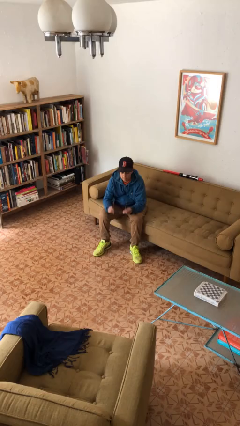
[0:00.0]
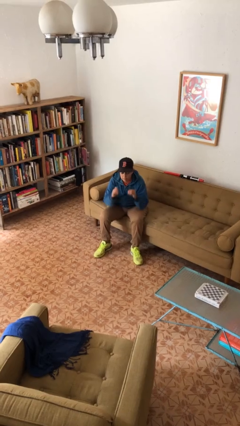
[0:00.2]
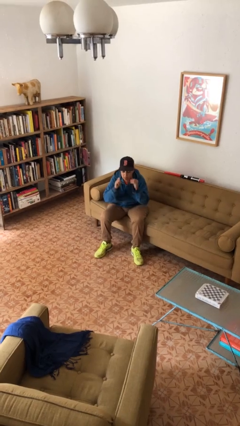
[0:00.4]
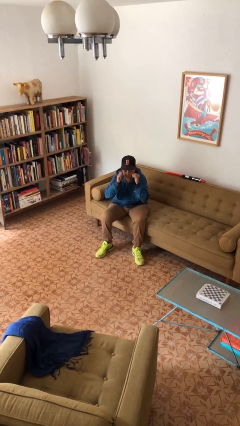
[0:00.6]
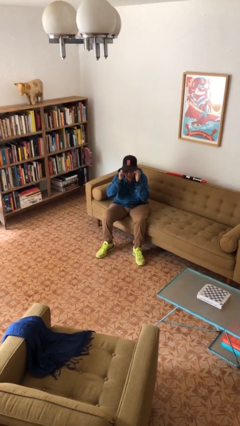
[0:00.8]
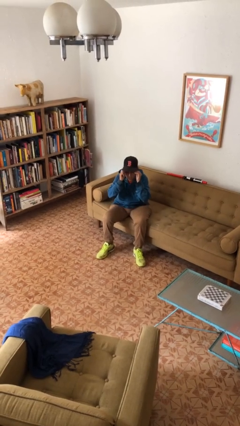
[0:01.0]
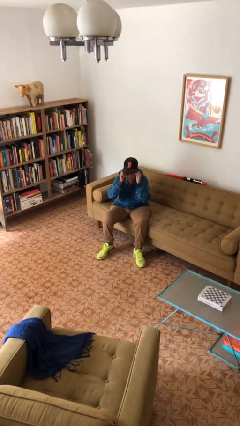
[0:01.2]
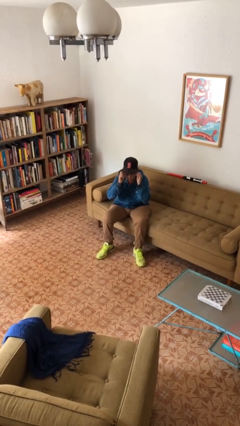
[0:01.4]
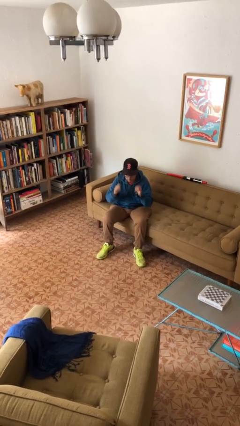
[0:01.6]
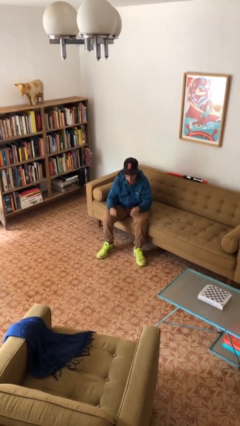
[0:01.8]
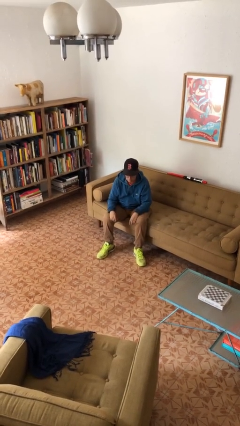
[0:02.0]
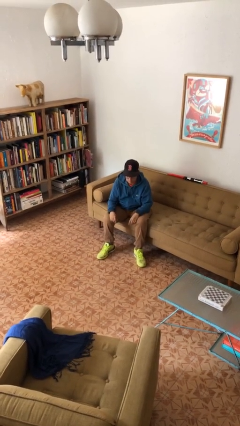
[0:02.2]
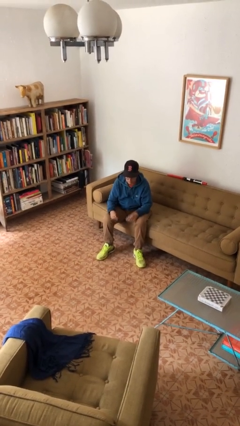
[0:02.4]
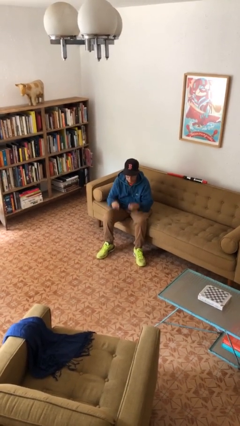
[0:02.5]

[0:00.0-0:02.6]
person puts on glasses

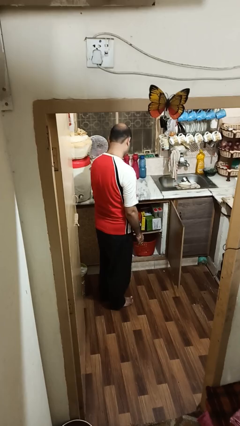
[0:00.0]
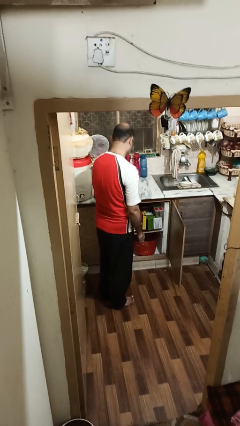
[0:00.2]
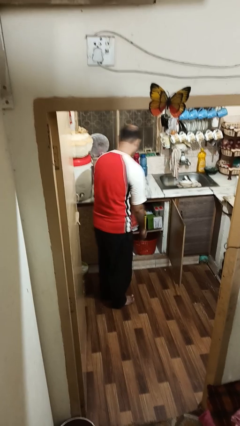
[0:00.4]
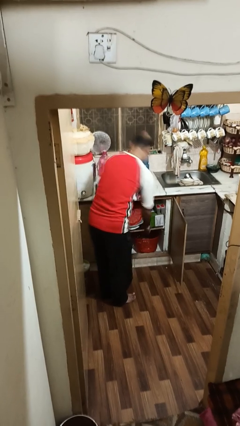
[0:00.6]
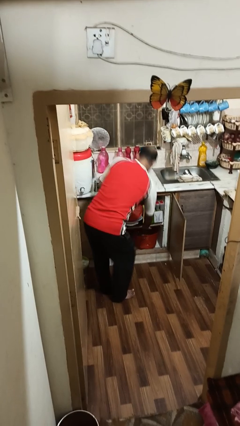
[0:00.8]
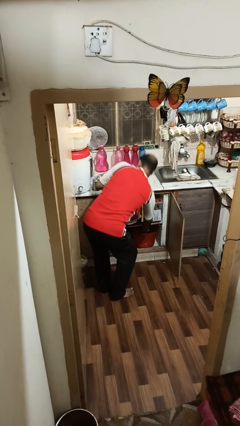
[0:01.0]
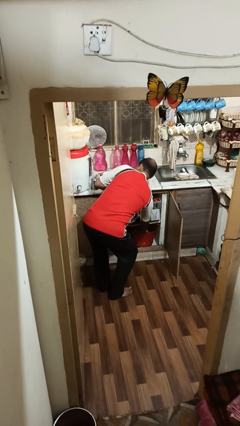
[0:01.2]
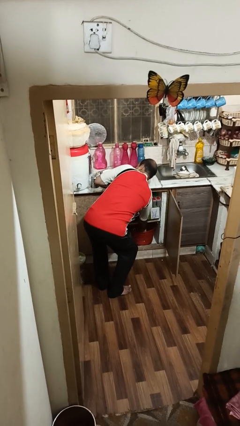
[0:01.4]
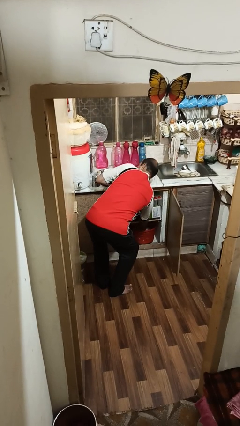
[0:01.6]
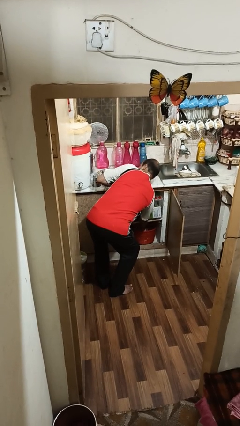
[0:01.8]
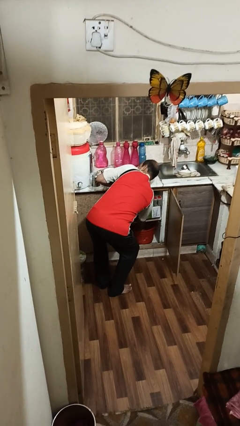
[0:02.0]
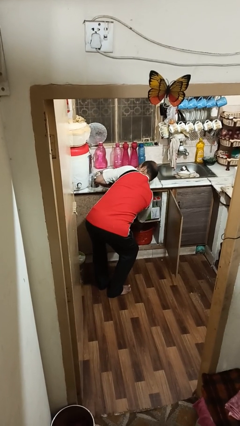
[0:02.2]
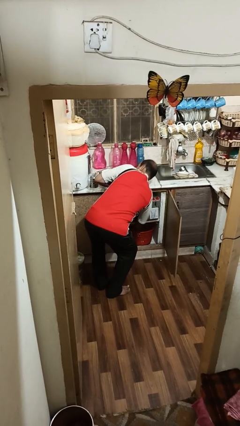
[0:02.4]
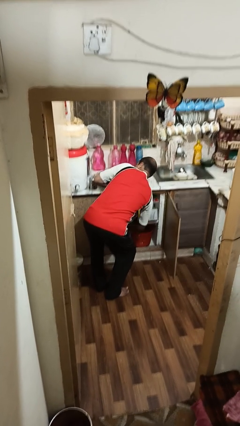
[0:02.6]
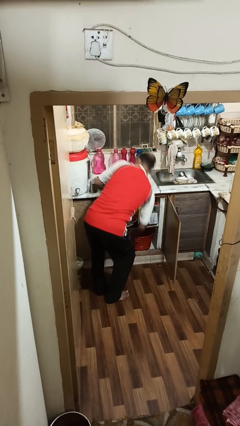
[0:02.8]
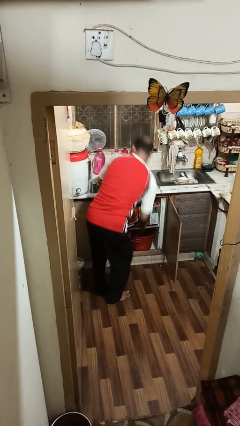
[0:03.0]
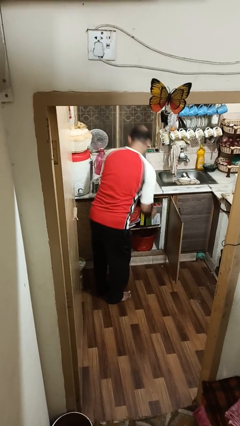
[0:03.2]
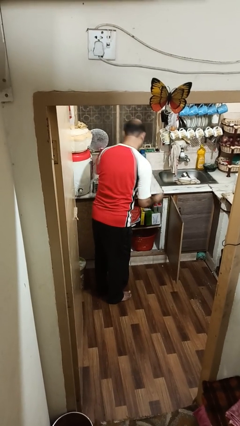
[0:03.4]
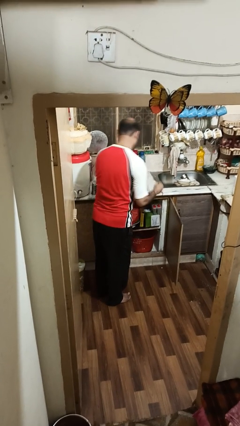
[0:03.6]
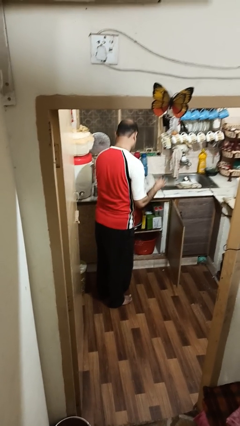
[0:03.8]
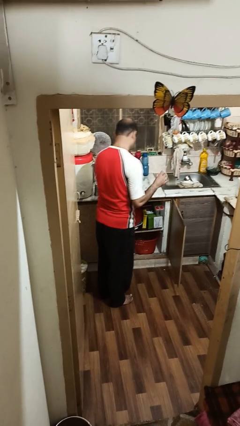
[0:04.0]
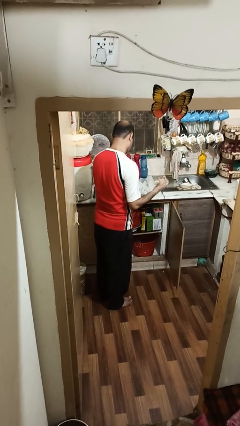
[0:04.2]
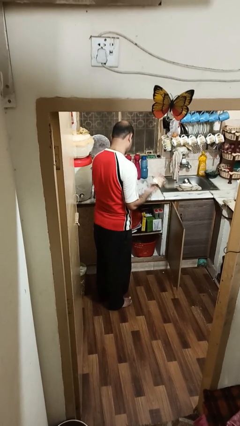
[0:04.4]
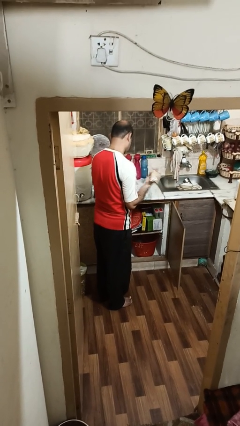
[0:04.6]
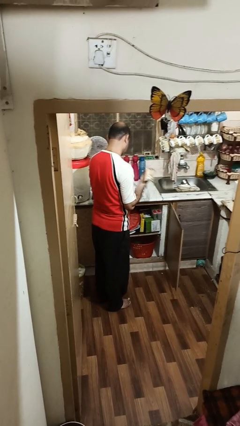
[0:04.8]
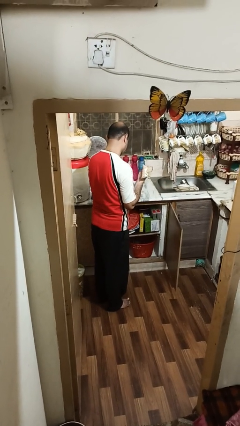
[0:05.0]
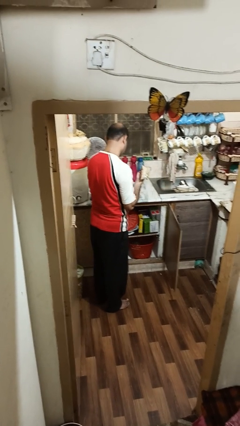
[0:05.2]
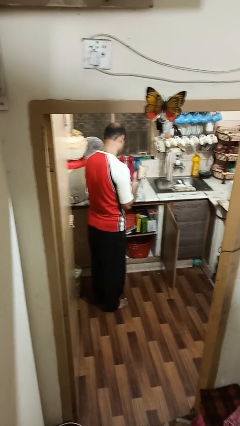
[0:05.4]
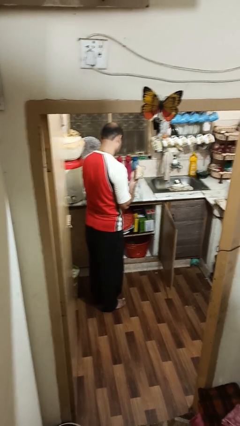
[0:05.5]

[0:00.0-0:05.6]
person takes object from cabinet

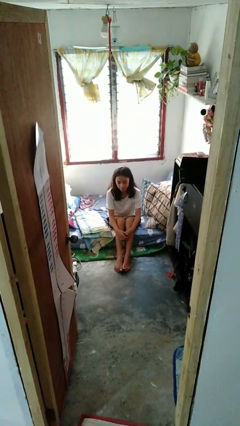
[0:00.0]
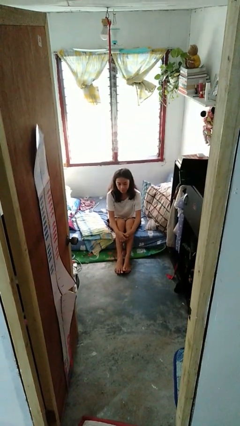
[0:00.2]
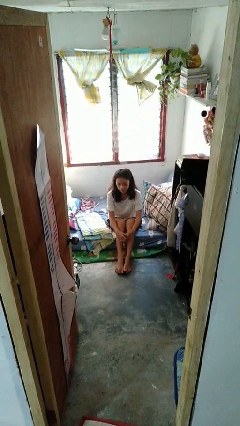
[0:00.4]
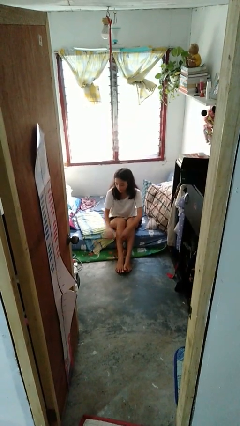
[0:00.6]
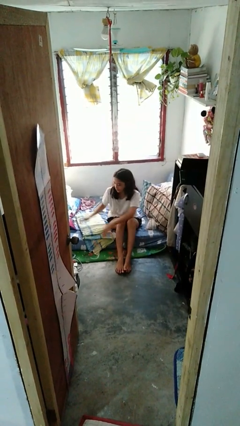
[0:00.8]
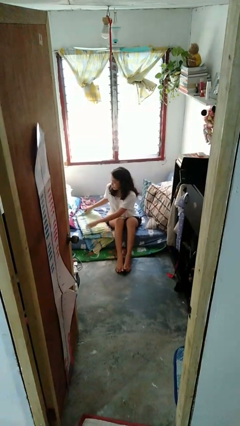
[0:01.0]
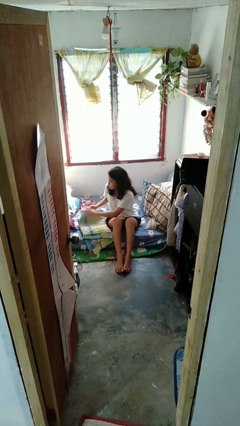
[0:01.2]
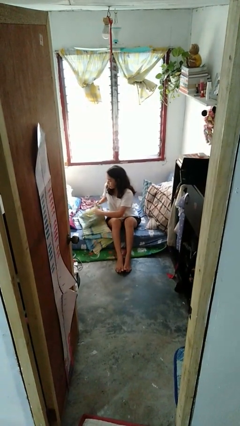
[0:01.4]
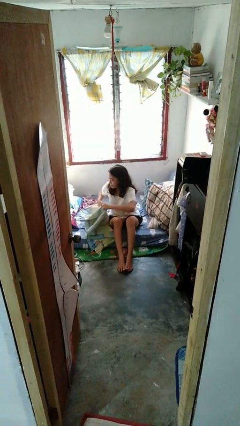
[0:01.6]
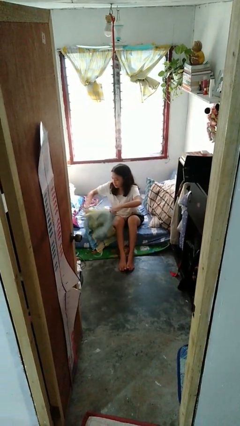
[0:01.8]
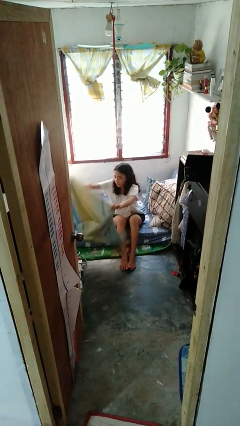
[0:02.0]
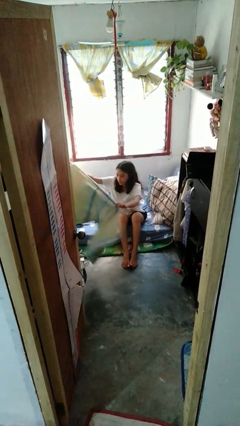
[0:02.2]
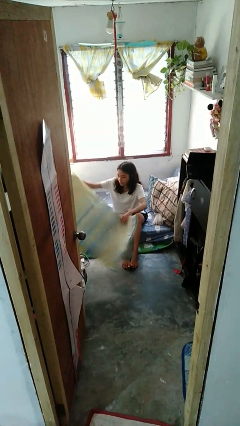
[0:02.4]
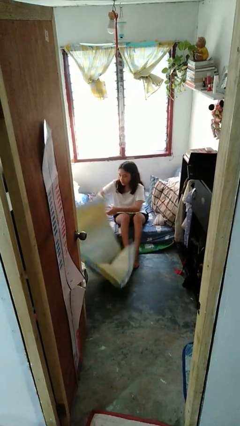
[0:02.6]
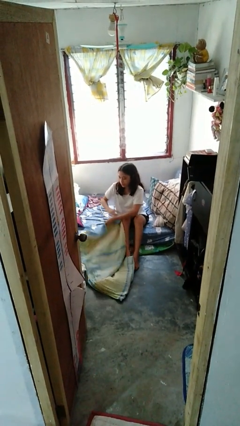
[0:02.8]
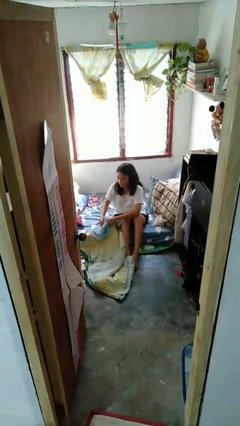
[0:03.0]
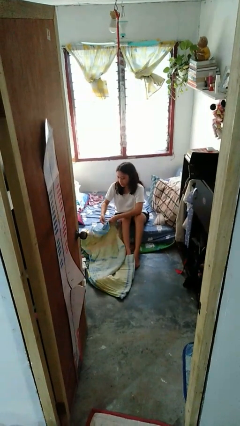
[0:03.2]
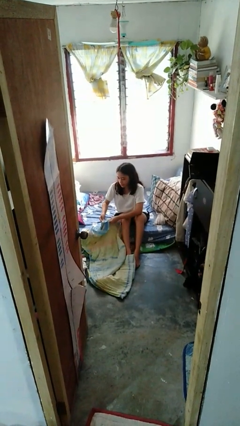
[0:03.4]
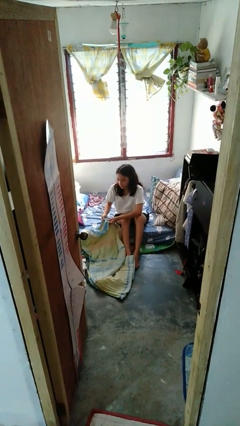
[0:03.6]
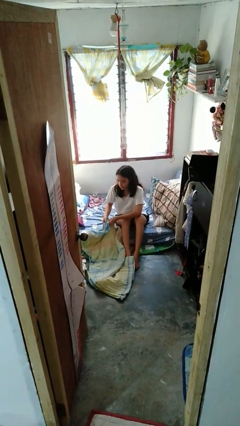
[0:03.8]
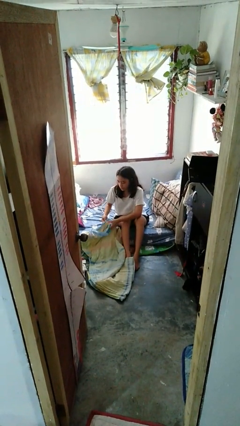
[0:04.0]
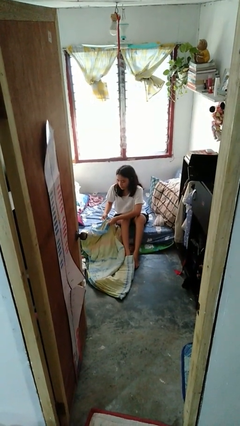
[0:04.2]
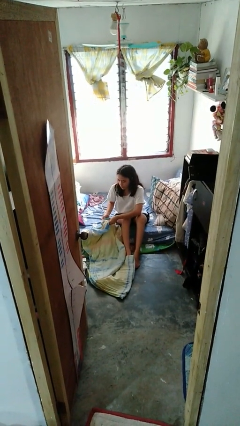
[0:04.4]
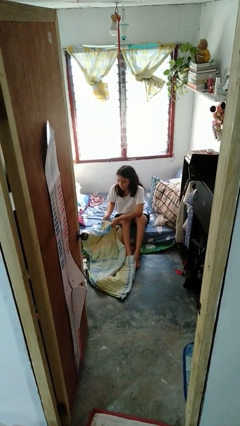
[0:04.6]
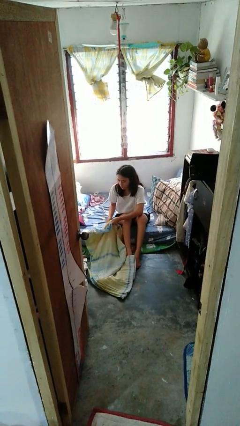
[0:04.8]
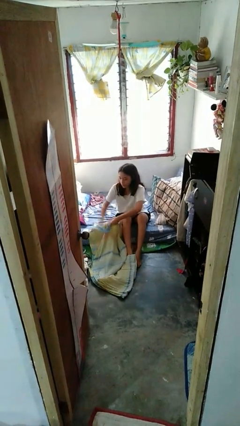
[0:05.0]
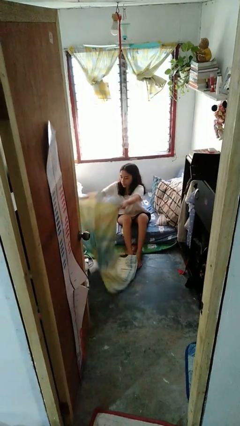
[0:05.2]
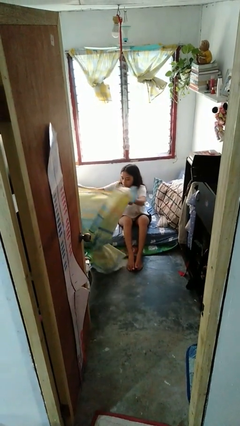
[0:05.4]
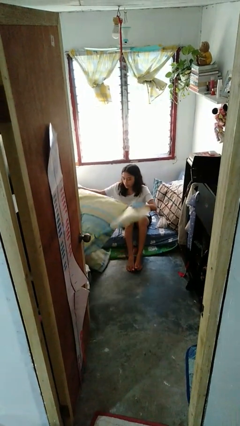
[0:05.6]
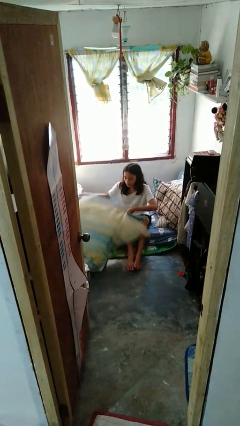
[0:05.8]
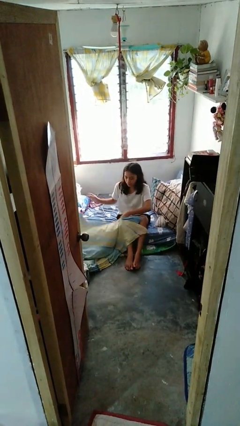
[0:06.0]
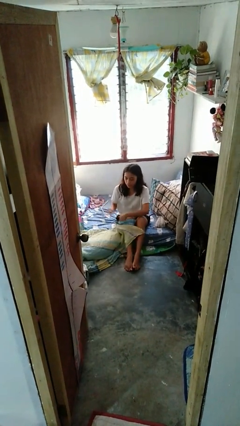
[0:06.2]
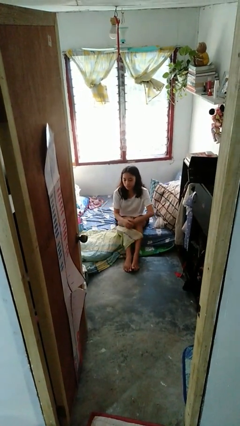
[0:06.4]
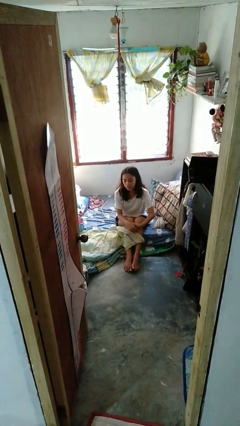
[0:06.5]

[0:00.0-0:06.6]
person unfolds blanket

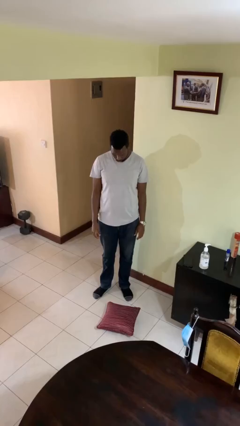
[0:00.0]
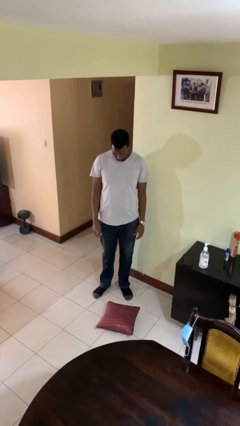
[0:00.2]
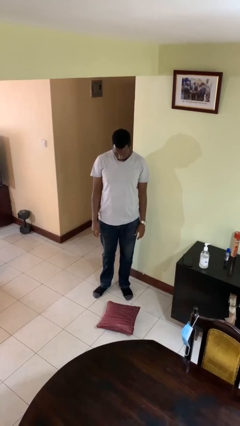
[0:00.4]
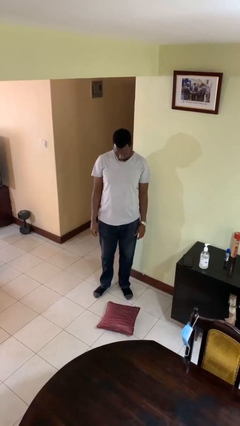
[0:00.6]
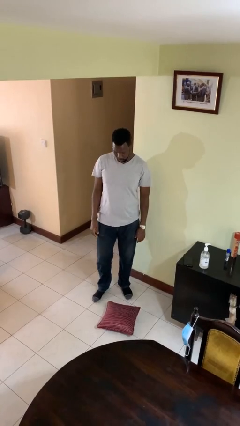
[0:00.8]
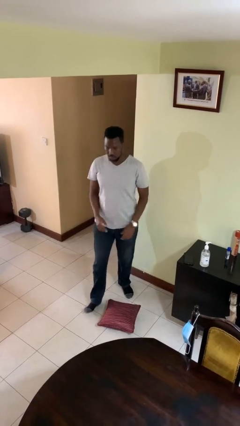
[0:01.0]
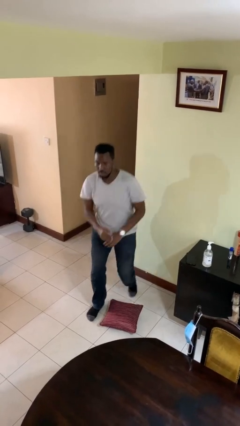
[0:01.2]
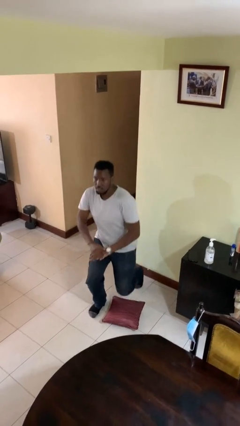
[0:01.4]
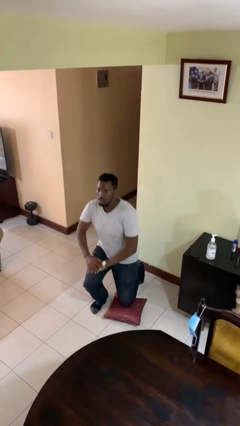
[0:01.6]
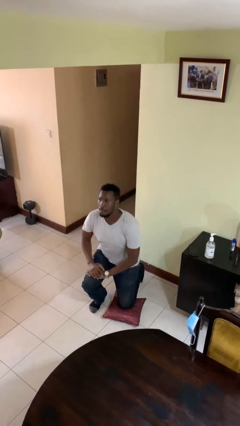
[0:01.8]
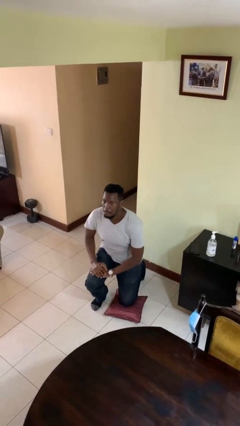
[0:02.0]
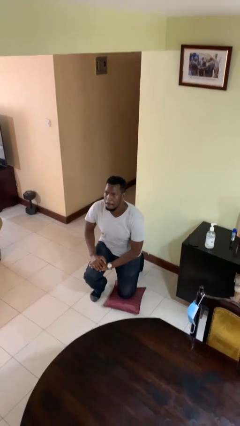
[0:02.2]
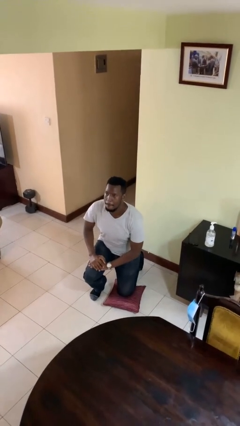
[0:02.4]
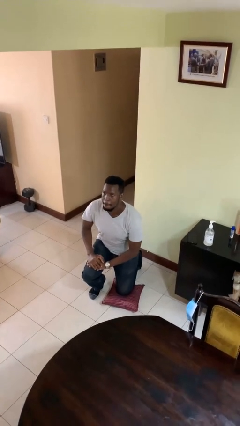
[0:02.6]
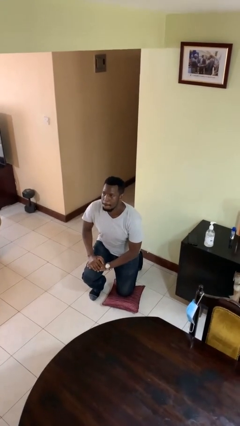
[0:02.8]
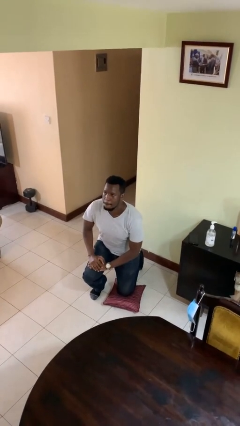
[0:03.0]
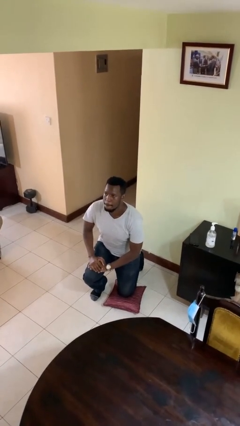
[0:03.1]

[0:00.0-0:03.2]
person kneels

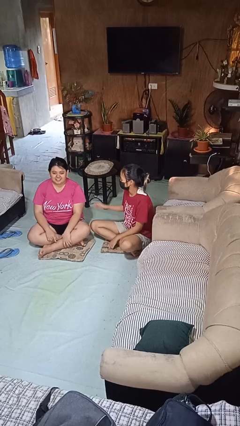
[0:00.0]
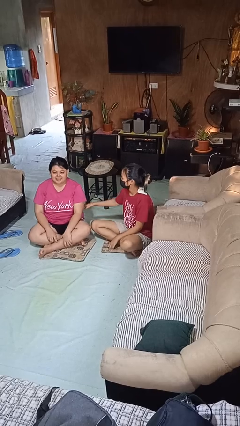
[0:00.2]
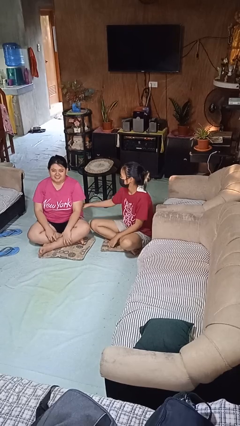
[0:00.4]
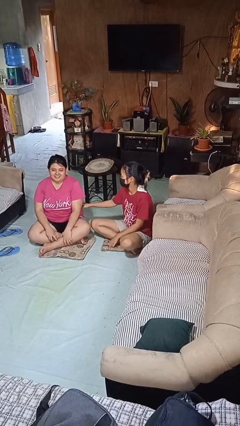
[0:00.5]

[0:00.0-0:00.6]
person tickles person
